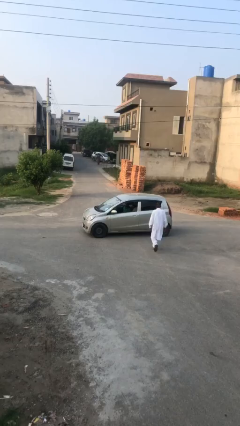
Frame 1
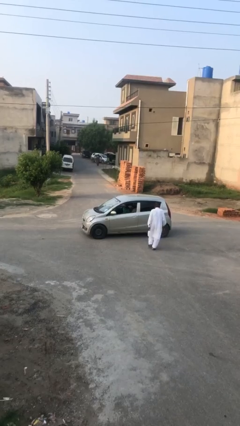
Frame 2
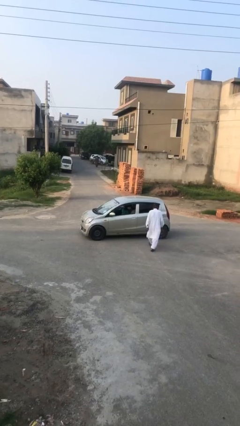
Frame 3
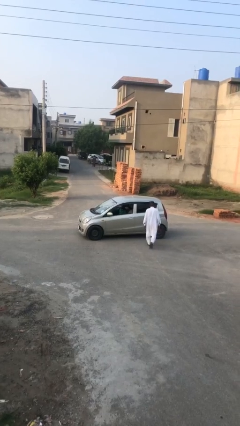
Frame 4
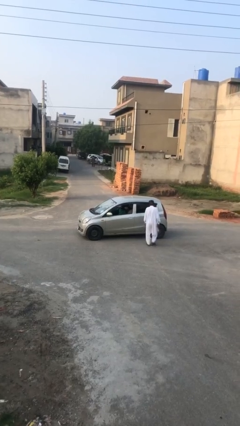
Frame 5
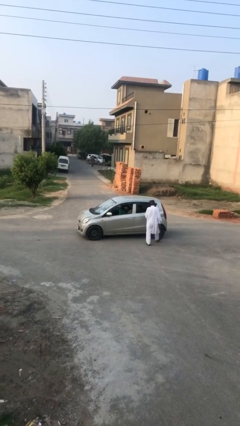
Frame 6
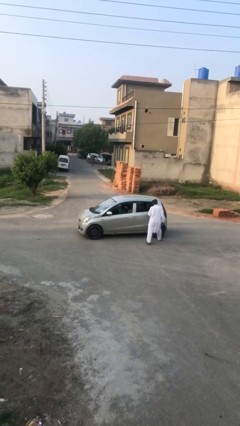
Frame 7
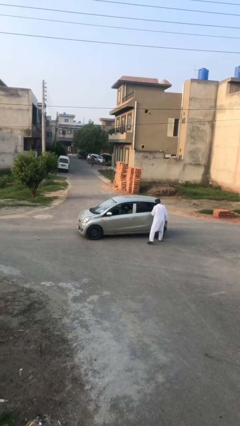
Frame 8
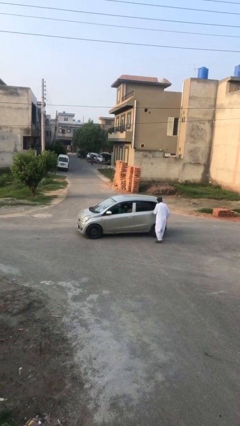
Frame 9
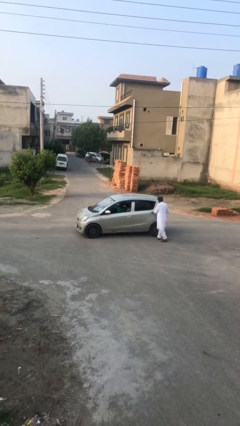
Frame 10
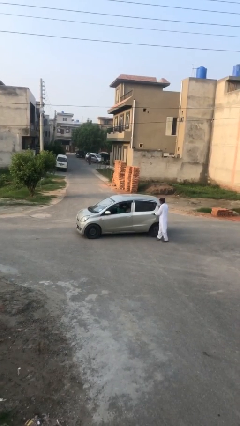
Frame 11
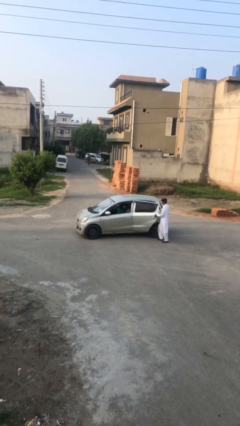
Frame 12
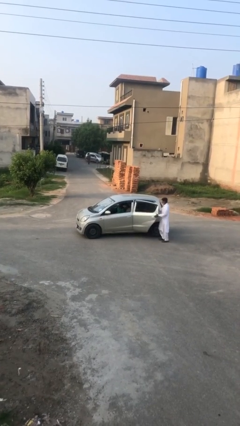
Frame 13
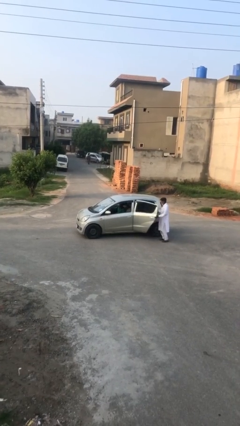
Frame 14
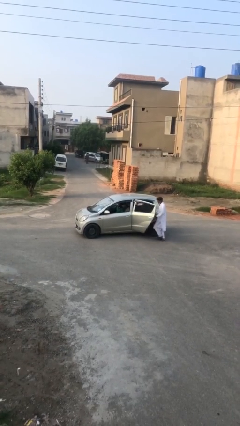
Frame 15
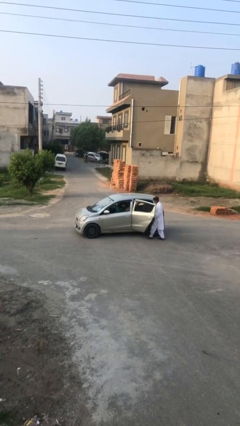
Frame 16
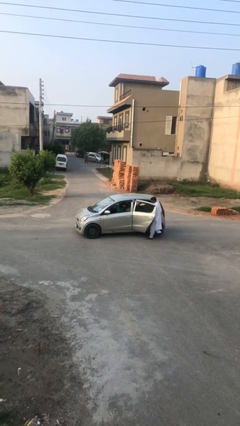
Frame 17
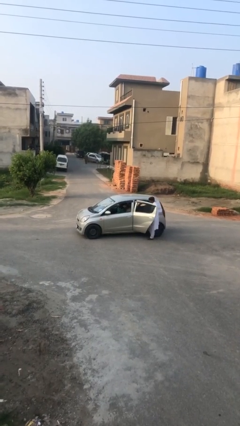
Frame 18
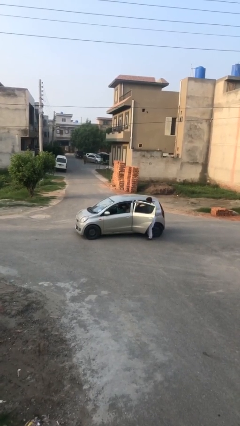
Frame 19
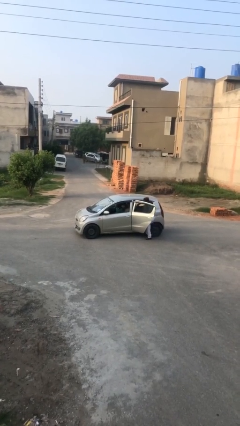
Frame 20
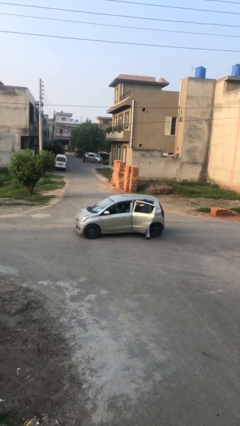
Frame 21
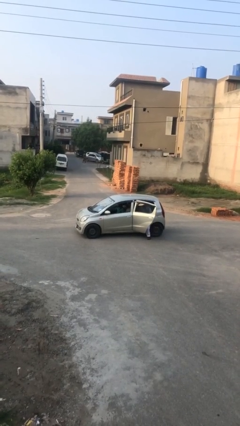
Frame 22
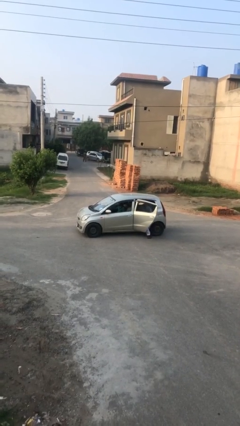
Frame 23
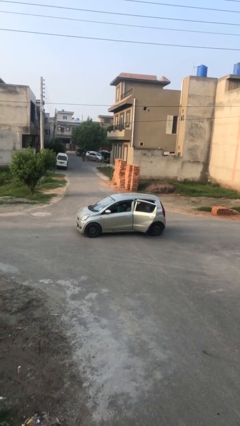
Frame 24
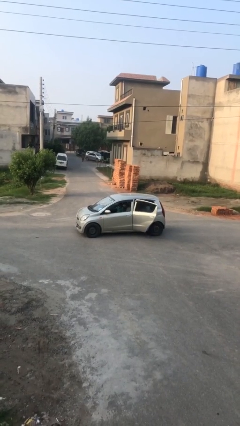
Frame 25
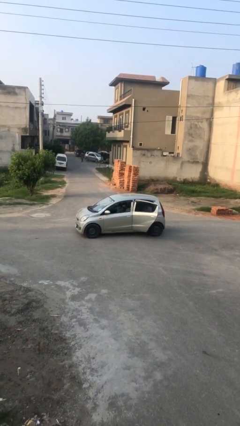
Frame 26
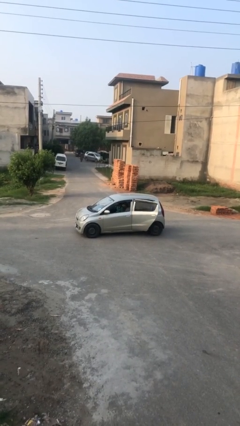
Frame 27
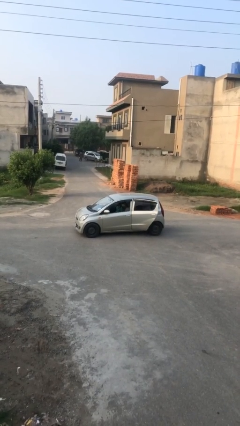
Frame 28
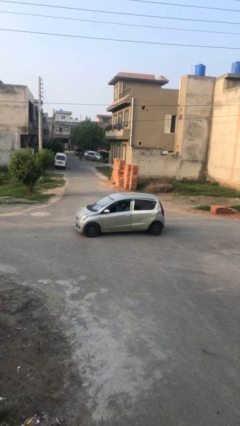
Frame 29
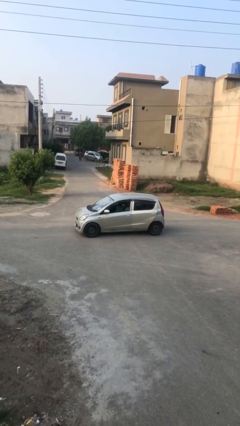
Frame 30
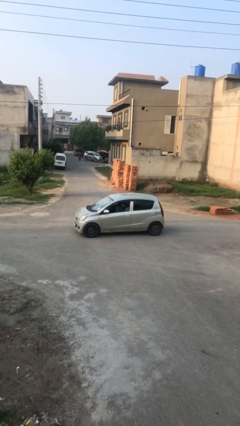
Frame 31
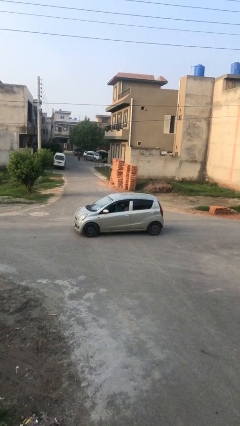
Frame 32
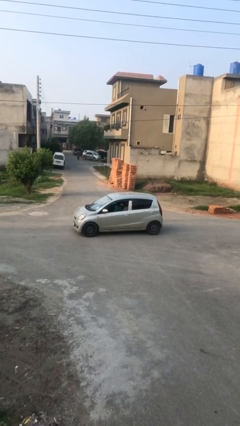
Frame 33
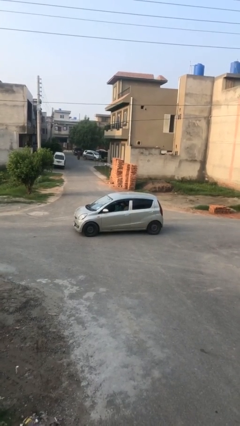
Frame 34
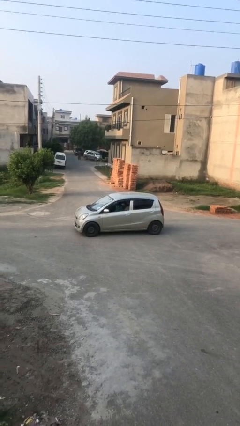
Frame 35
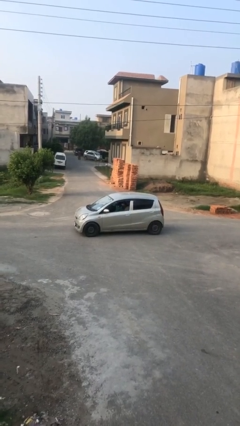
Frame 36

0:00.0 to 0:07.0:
car picks up person

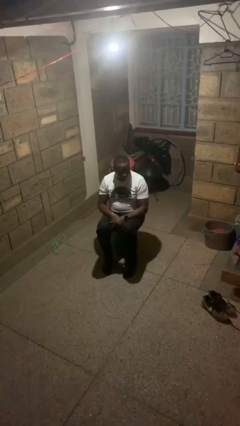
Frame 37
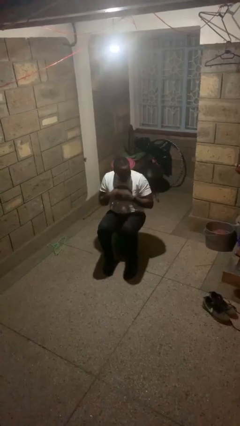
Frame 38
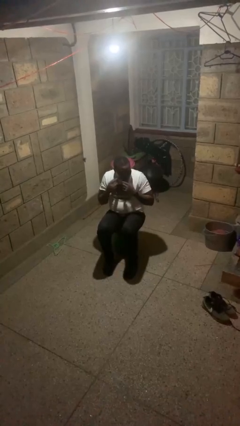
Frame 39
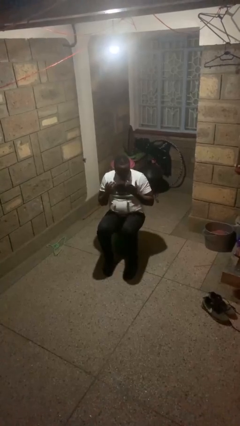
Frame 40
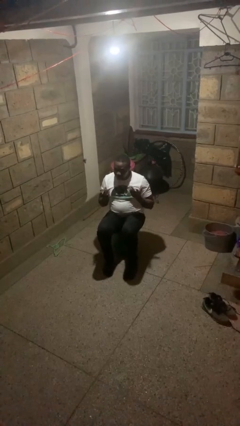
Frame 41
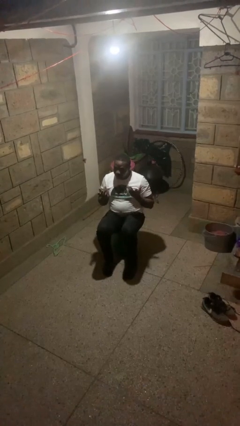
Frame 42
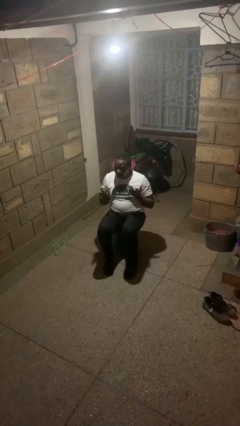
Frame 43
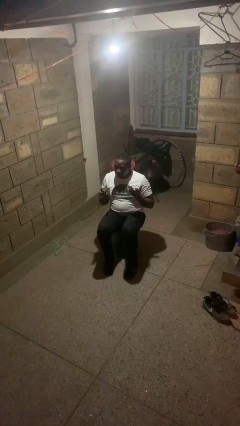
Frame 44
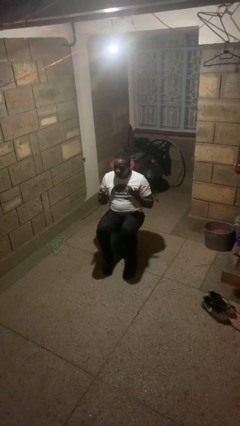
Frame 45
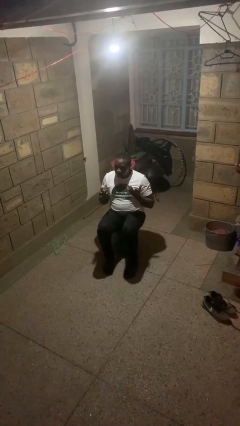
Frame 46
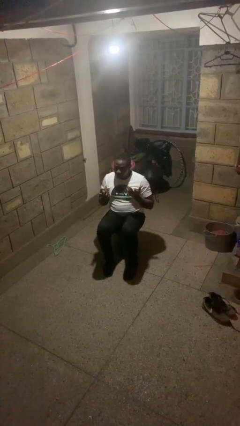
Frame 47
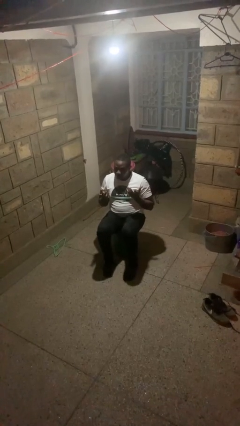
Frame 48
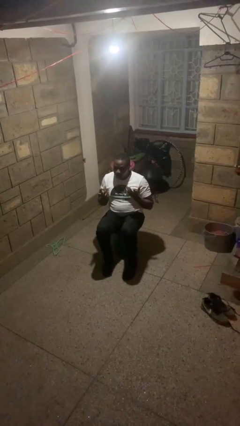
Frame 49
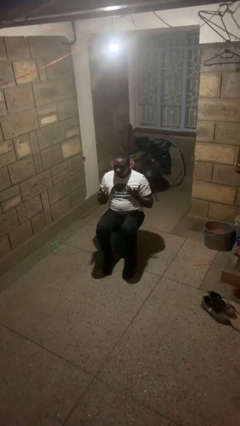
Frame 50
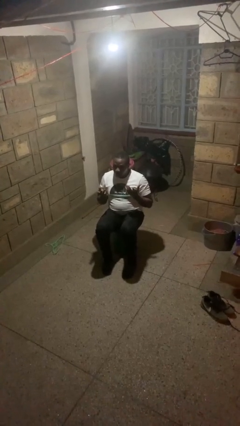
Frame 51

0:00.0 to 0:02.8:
person shrugs

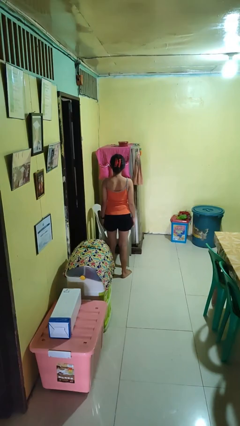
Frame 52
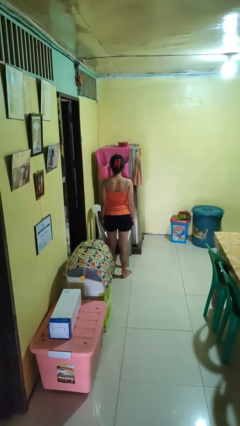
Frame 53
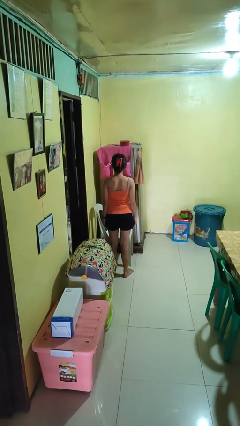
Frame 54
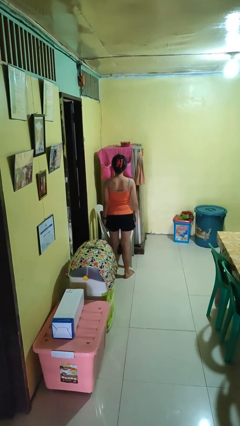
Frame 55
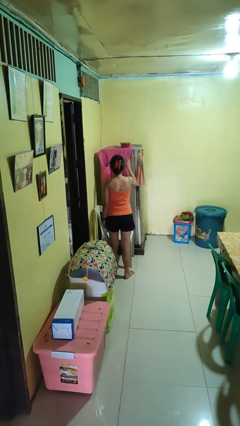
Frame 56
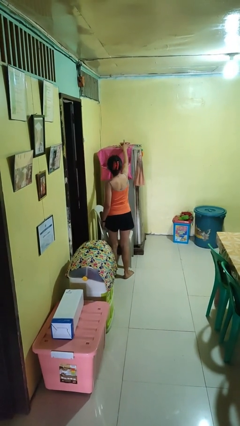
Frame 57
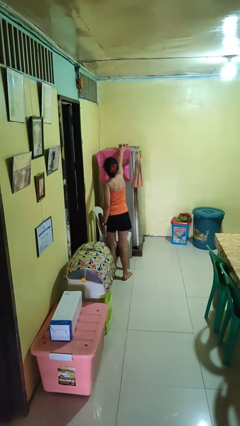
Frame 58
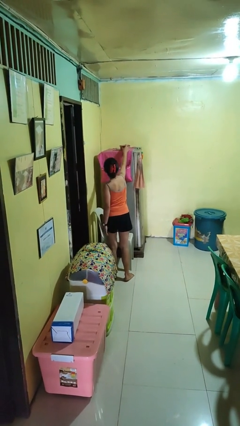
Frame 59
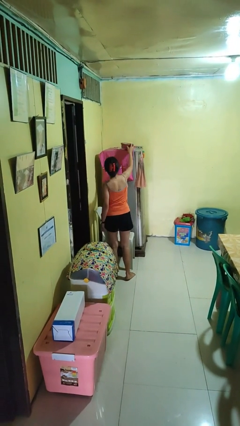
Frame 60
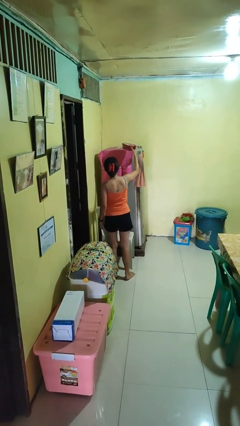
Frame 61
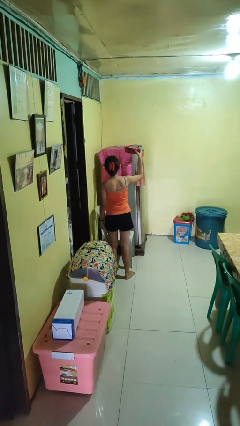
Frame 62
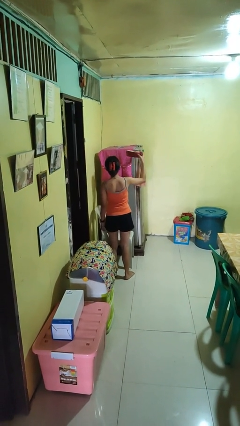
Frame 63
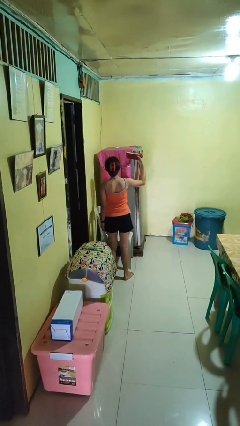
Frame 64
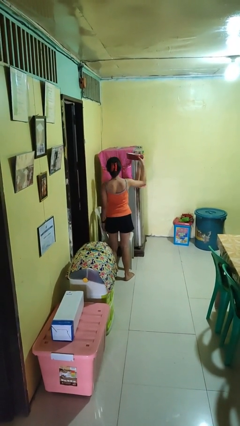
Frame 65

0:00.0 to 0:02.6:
person picks up object from shelf

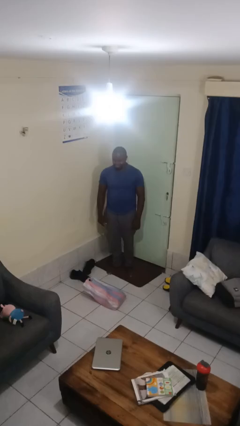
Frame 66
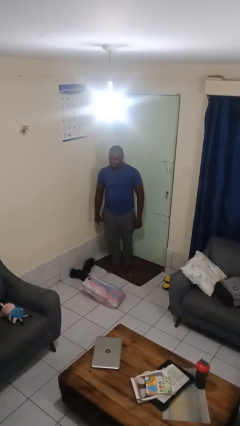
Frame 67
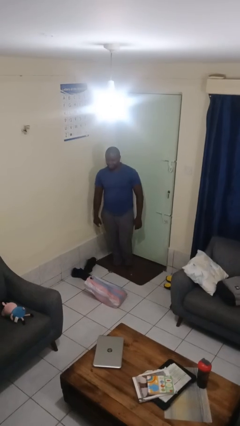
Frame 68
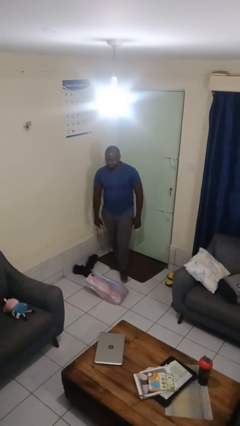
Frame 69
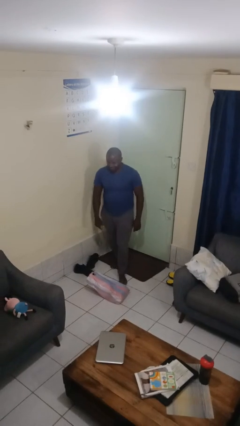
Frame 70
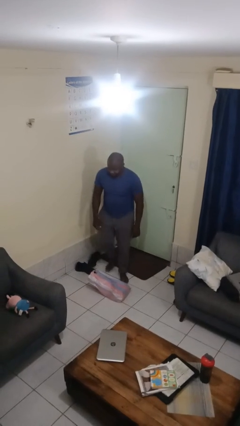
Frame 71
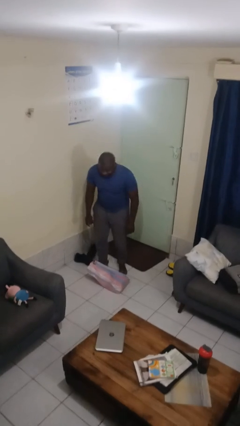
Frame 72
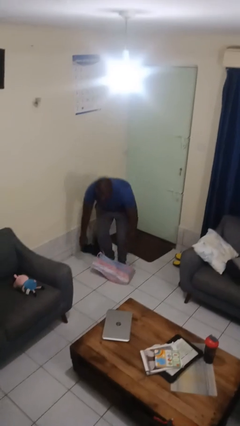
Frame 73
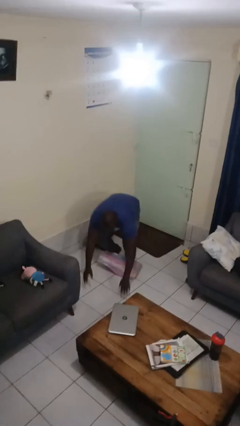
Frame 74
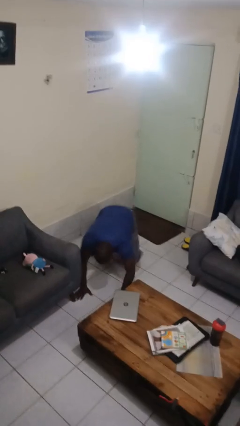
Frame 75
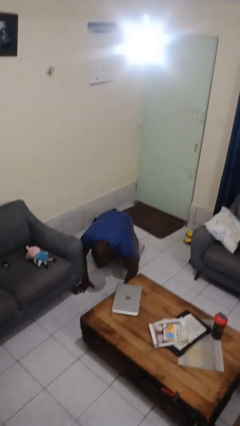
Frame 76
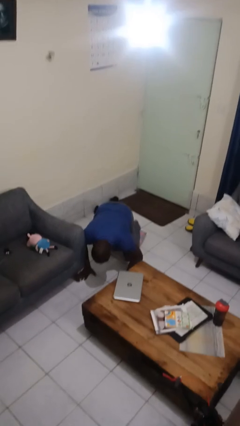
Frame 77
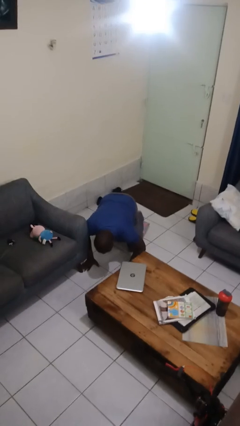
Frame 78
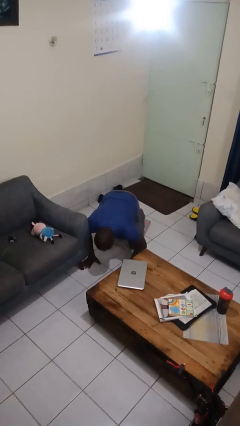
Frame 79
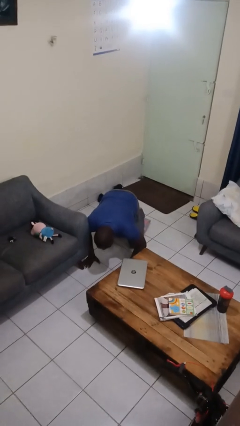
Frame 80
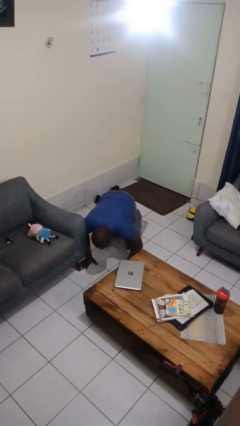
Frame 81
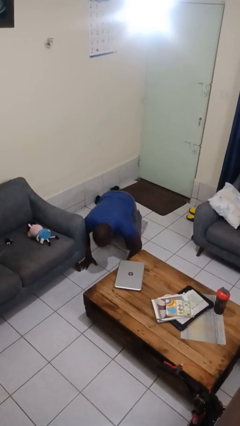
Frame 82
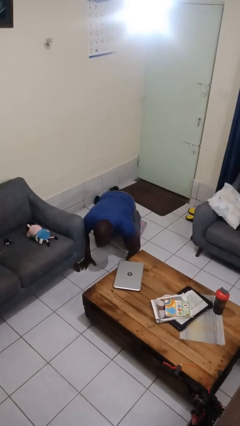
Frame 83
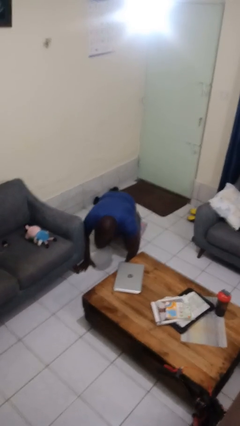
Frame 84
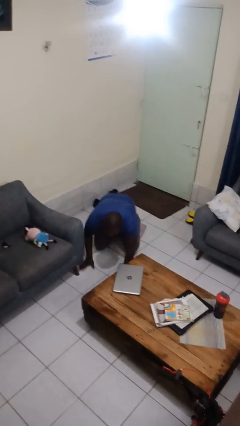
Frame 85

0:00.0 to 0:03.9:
person trips on object on floor

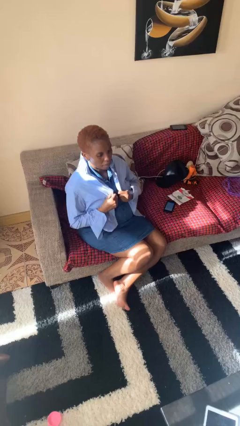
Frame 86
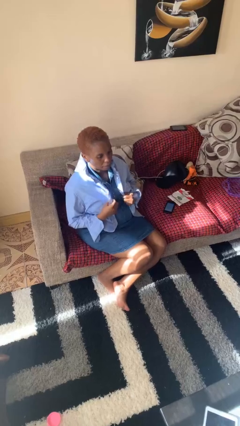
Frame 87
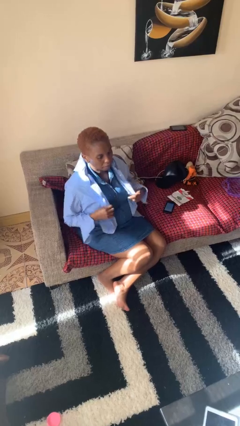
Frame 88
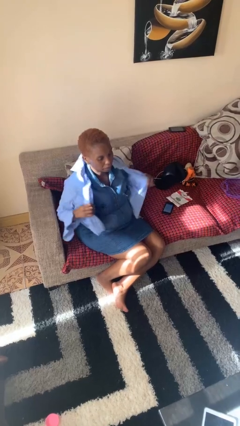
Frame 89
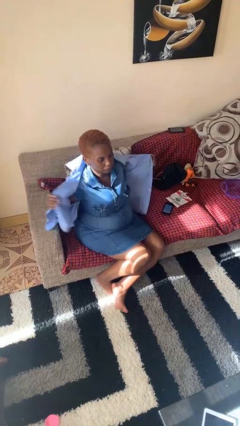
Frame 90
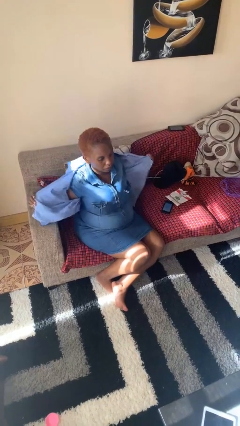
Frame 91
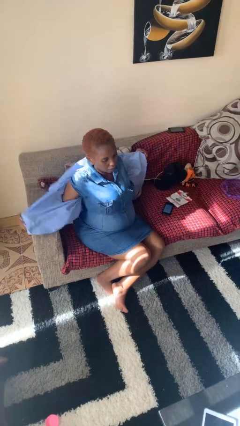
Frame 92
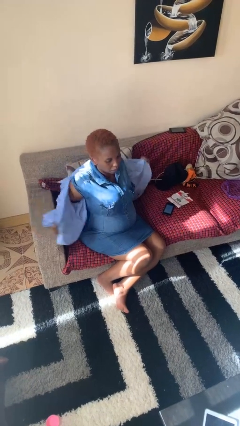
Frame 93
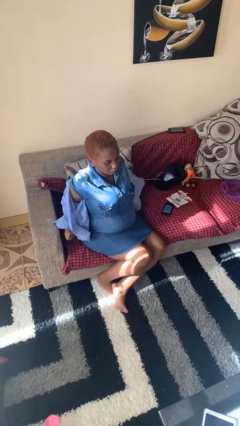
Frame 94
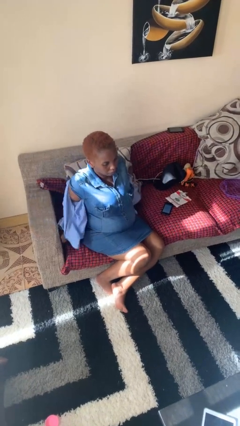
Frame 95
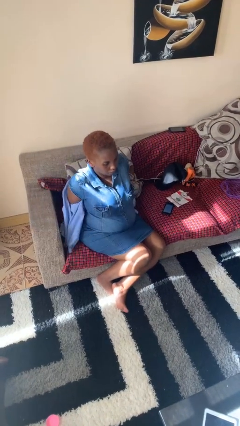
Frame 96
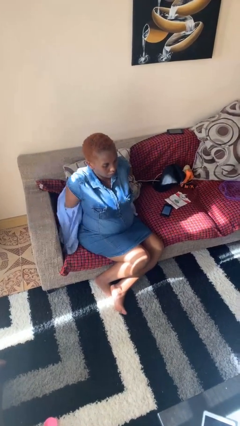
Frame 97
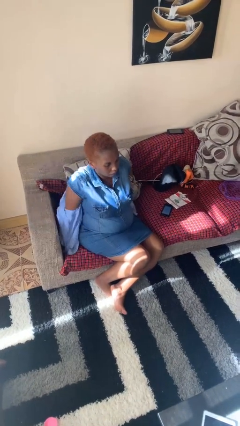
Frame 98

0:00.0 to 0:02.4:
person takes off shirt
